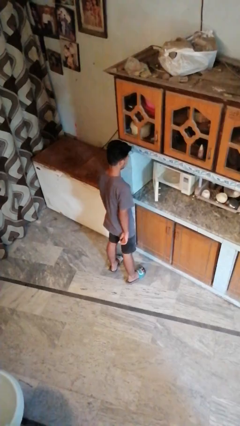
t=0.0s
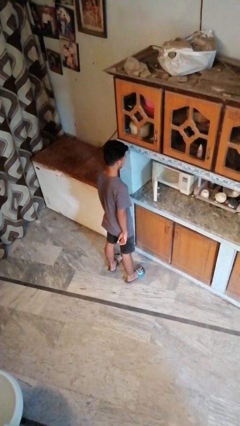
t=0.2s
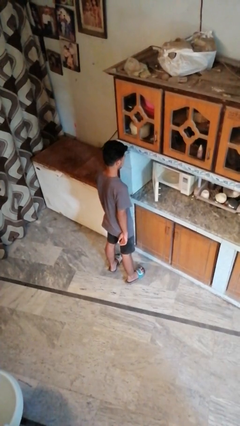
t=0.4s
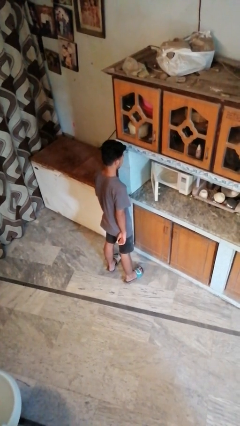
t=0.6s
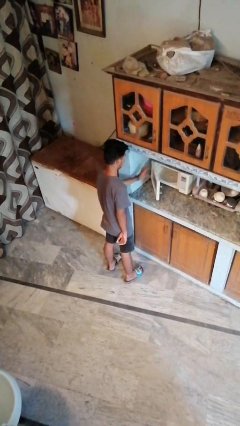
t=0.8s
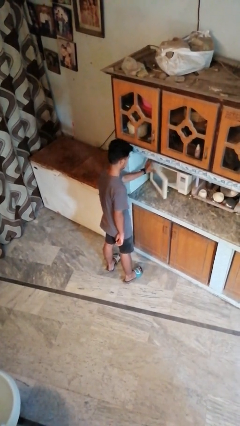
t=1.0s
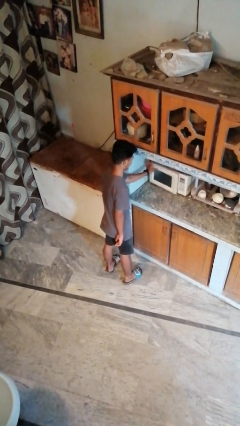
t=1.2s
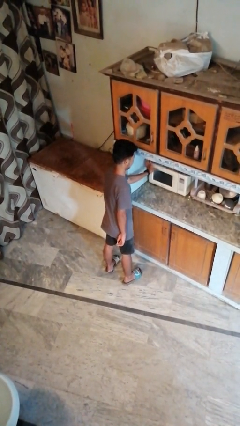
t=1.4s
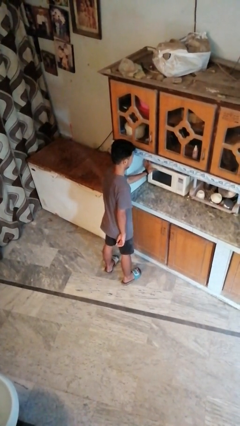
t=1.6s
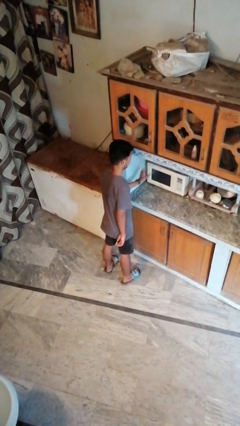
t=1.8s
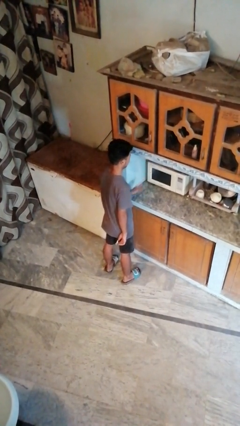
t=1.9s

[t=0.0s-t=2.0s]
person closes oven door

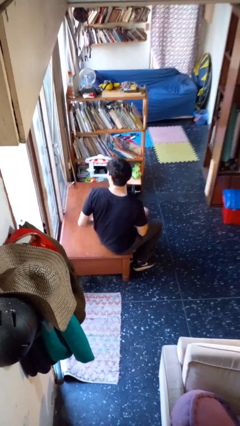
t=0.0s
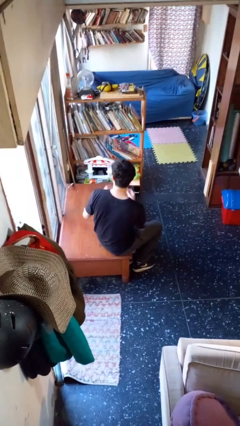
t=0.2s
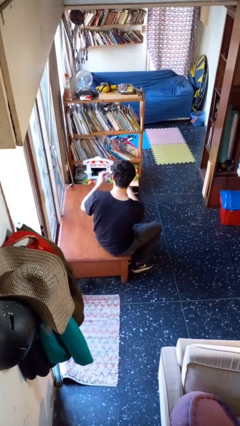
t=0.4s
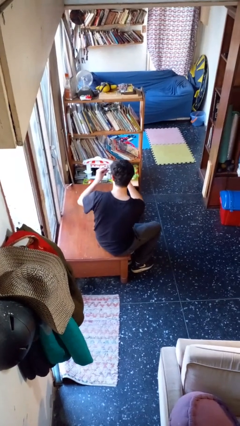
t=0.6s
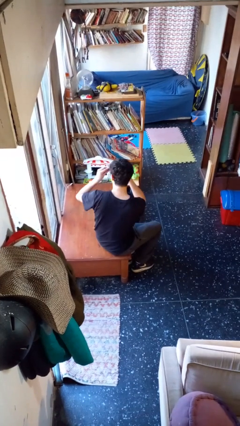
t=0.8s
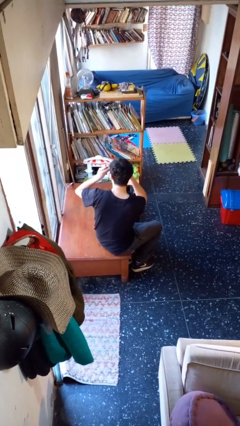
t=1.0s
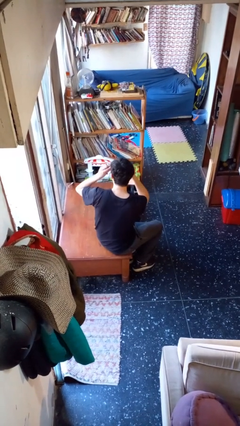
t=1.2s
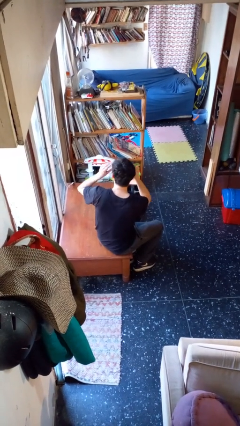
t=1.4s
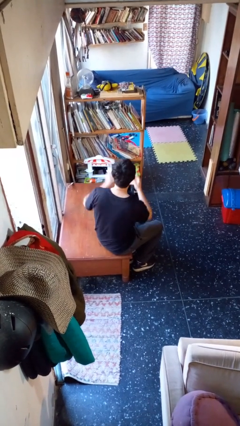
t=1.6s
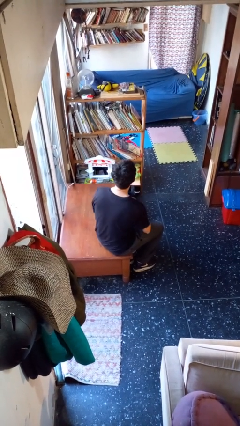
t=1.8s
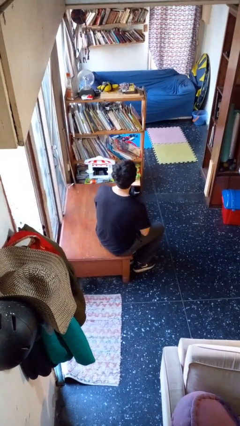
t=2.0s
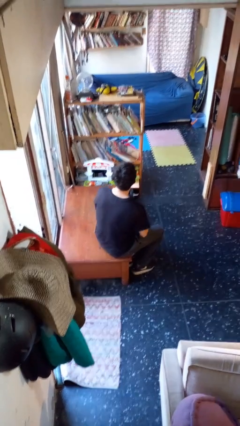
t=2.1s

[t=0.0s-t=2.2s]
person puts on glasses

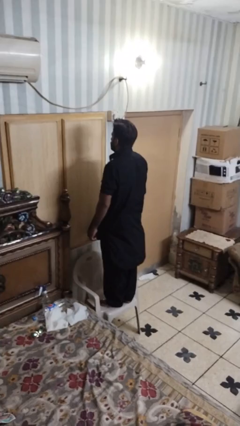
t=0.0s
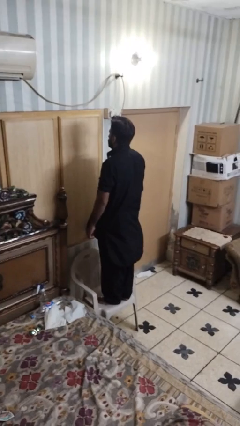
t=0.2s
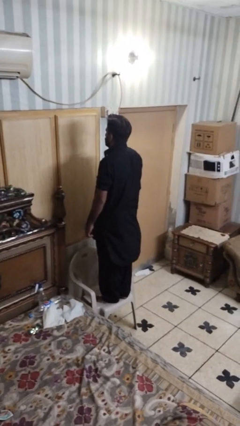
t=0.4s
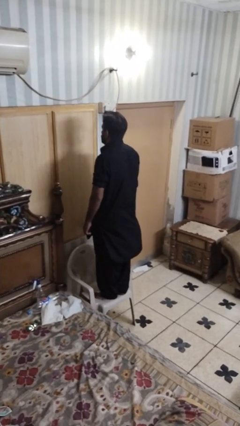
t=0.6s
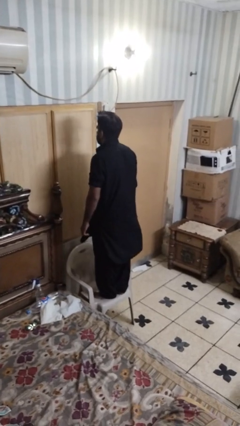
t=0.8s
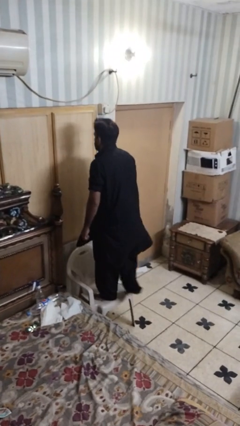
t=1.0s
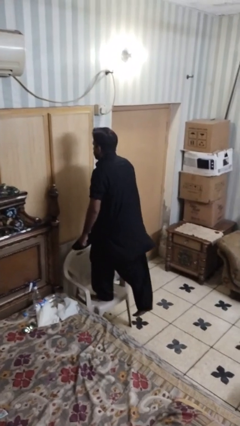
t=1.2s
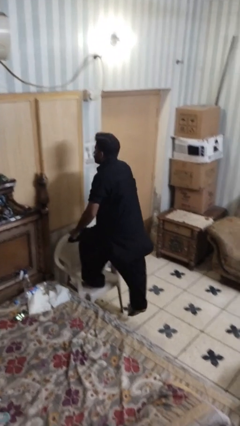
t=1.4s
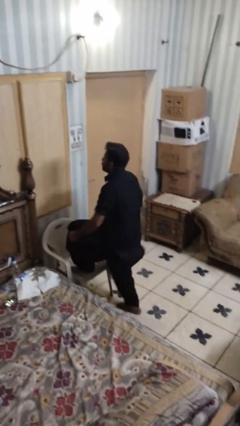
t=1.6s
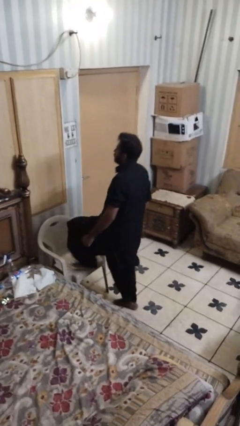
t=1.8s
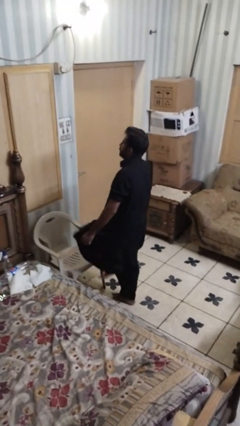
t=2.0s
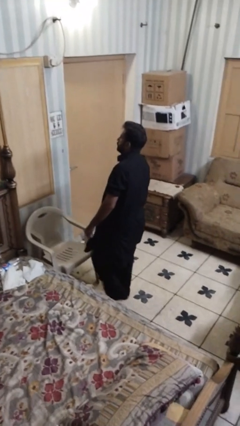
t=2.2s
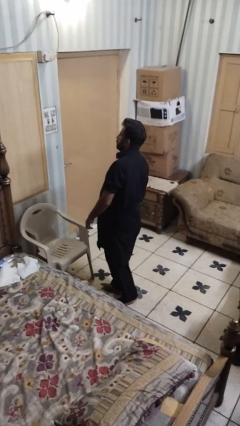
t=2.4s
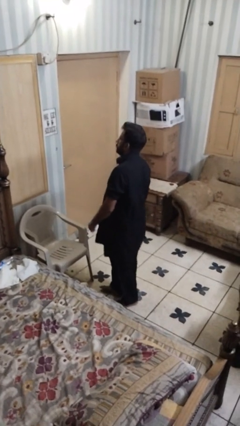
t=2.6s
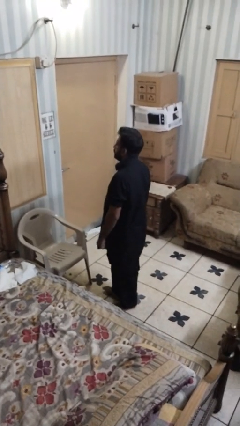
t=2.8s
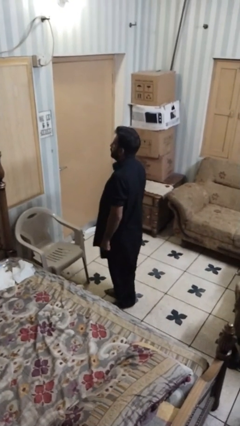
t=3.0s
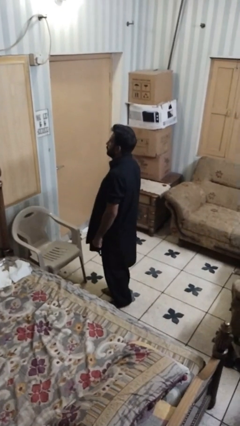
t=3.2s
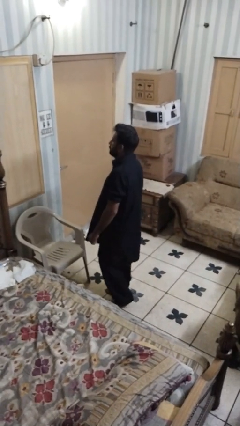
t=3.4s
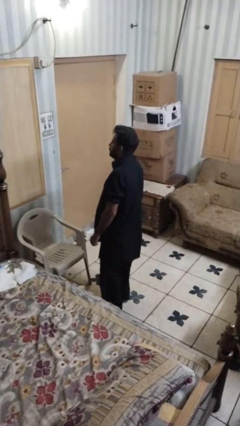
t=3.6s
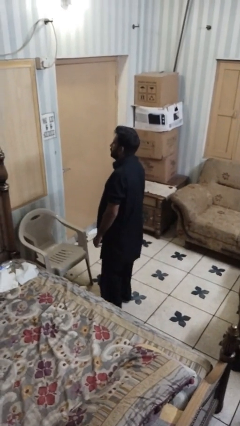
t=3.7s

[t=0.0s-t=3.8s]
person climbs off chair

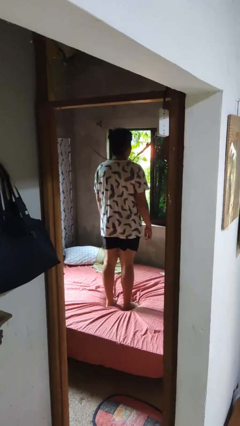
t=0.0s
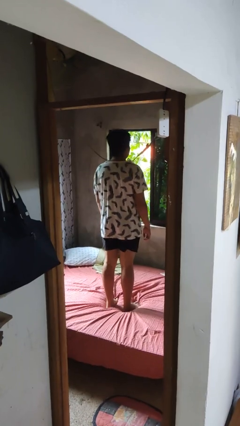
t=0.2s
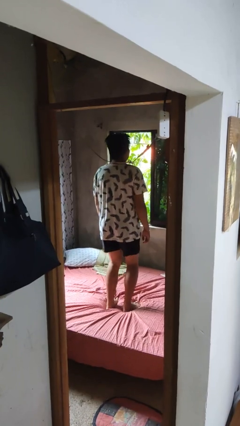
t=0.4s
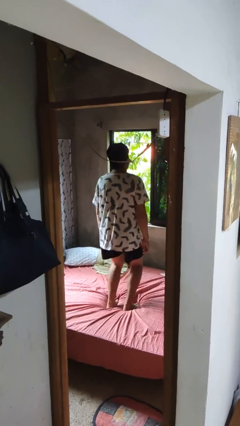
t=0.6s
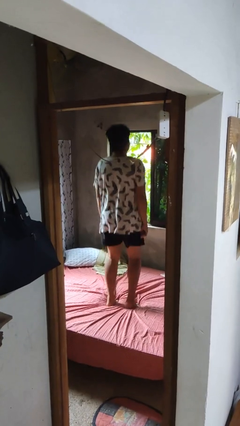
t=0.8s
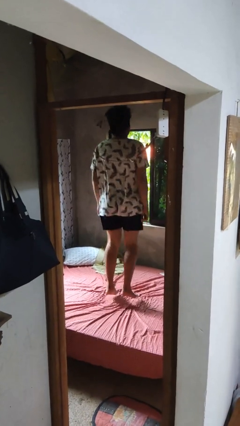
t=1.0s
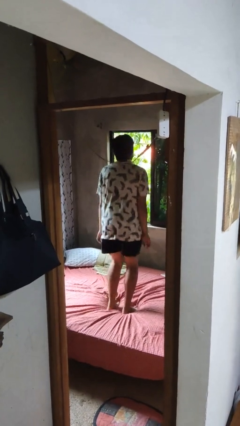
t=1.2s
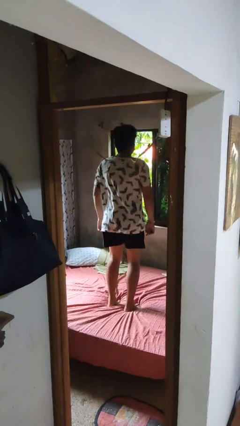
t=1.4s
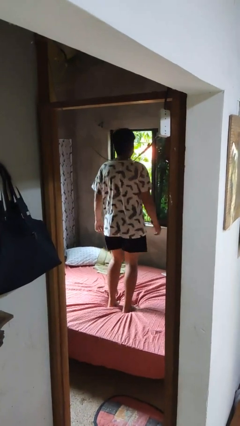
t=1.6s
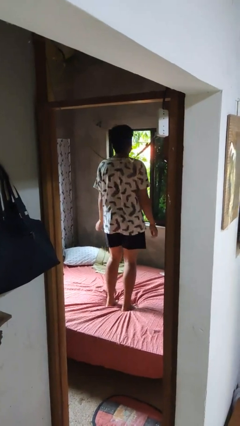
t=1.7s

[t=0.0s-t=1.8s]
person jumps on bed

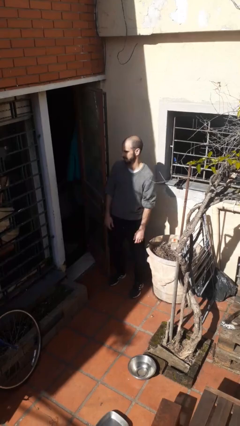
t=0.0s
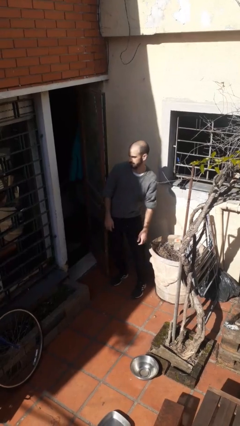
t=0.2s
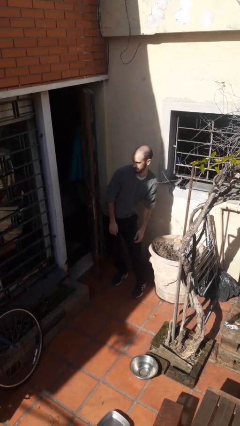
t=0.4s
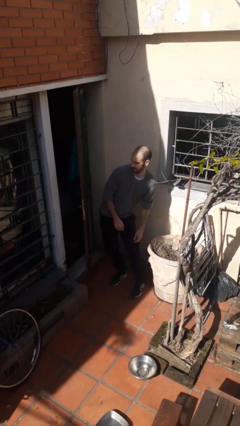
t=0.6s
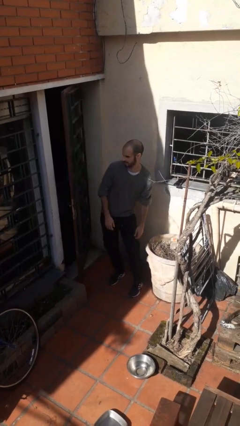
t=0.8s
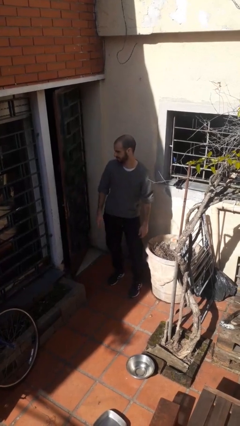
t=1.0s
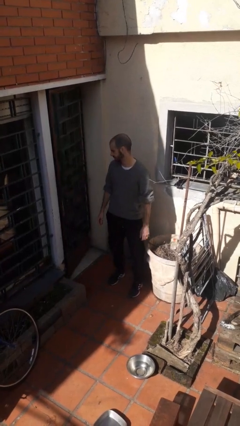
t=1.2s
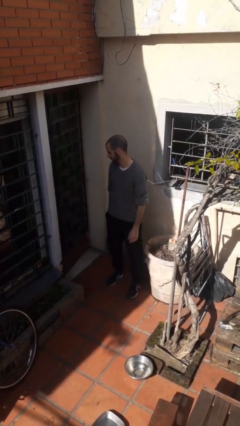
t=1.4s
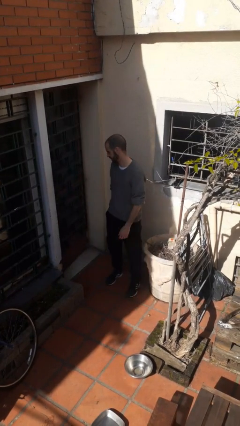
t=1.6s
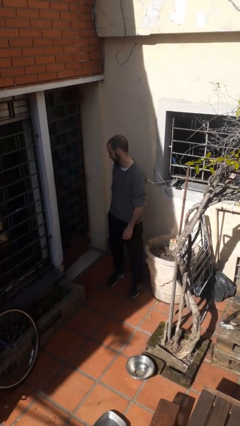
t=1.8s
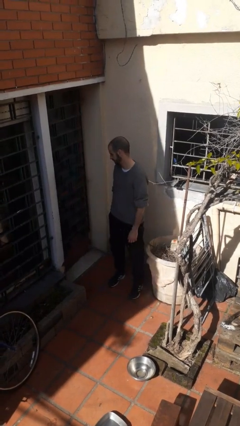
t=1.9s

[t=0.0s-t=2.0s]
person closes door with hip

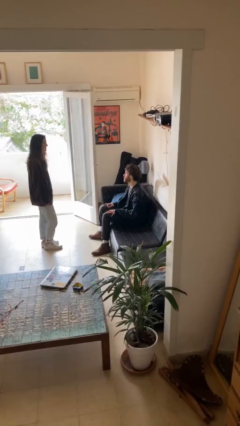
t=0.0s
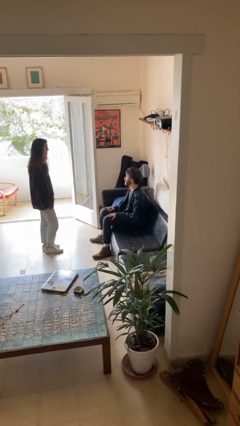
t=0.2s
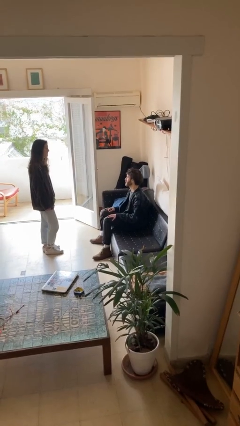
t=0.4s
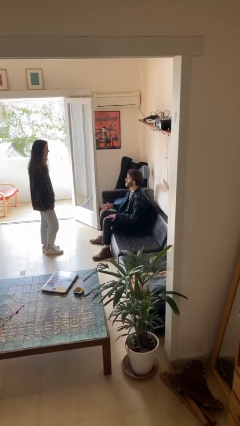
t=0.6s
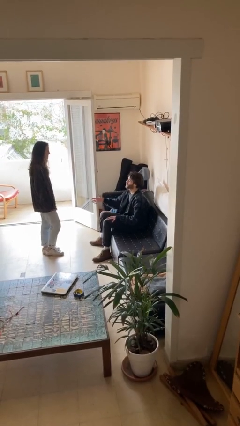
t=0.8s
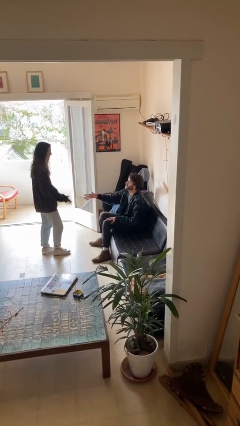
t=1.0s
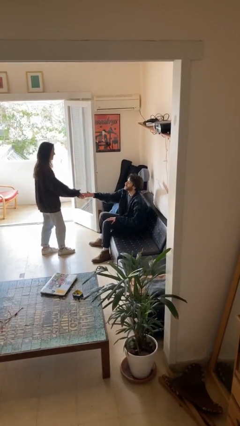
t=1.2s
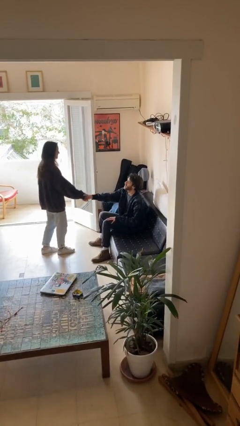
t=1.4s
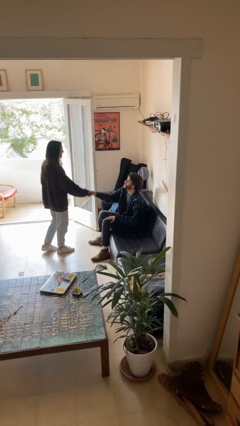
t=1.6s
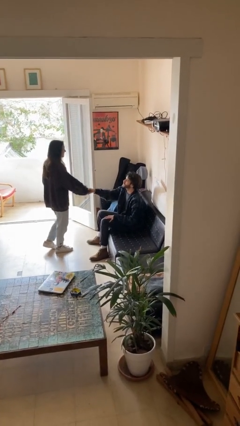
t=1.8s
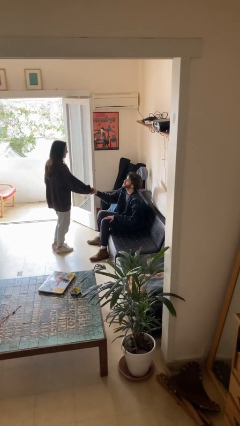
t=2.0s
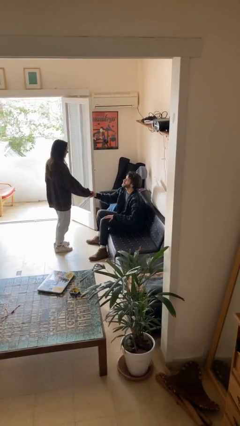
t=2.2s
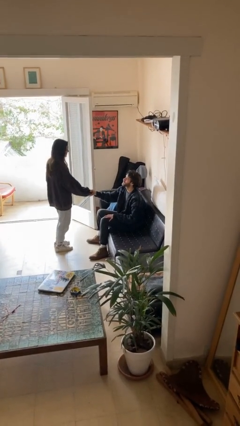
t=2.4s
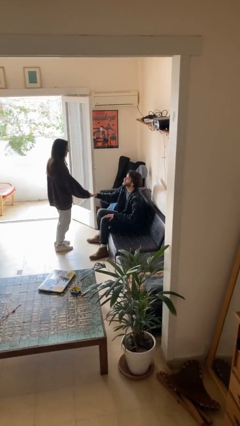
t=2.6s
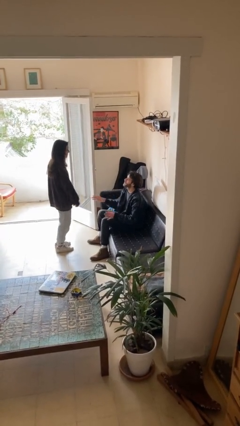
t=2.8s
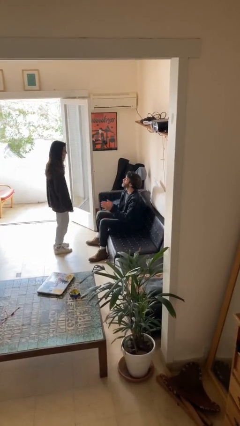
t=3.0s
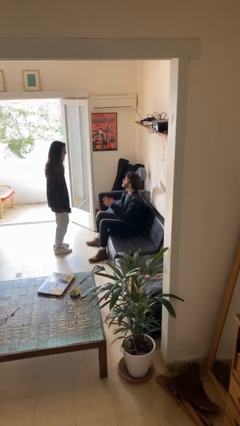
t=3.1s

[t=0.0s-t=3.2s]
person shakes hand

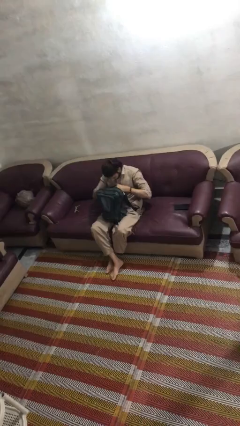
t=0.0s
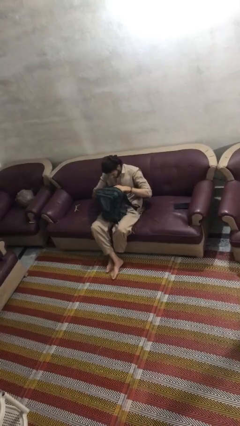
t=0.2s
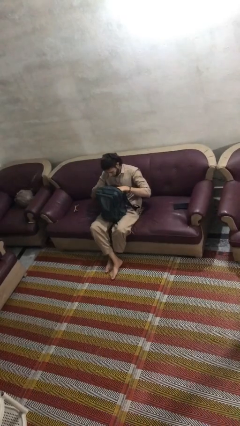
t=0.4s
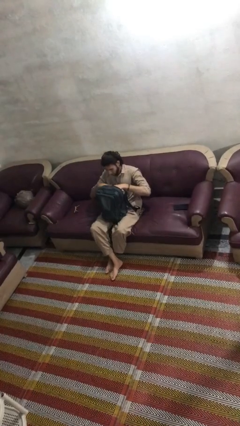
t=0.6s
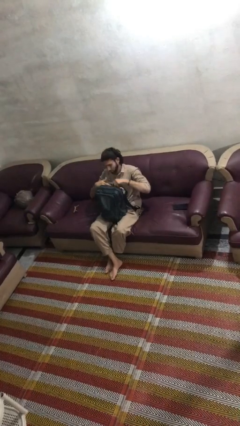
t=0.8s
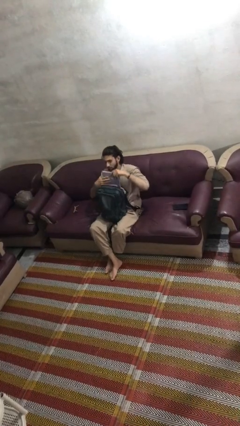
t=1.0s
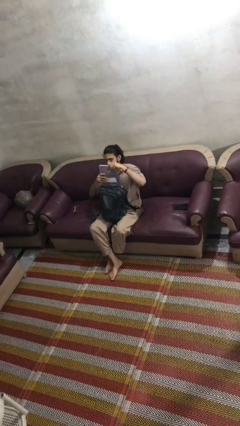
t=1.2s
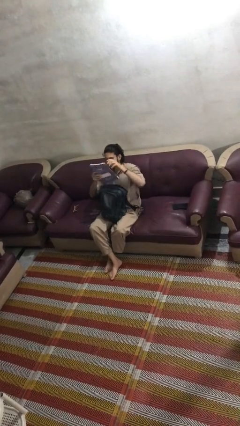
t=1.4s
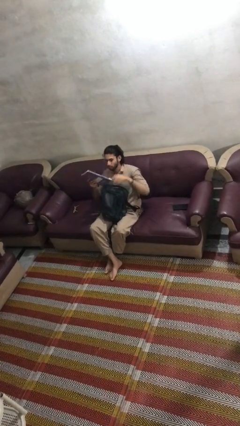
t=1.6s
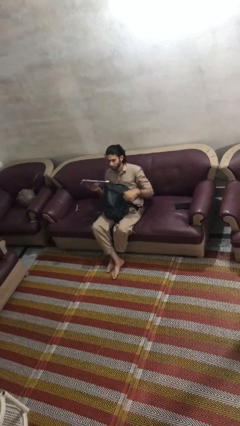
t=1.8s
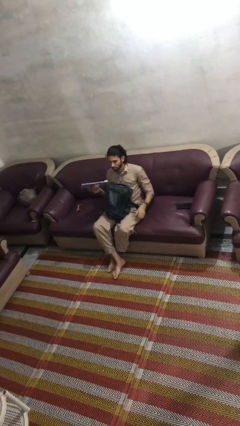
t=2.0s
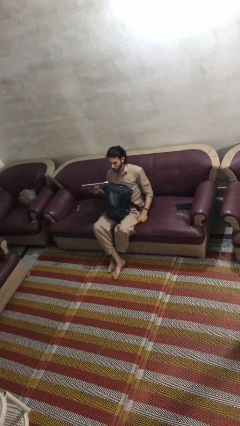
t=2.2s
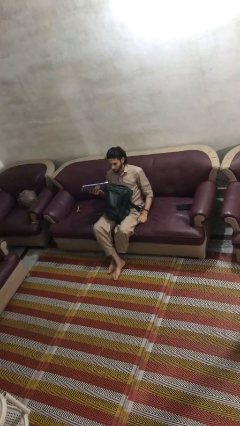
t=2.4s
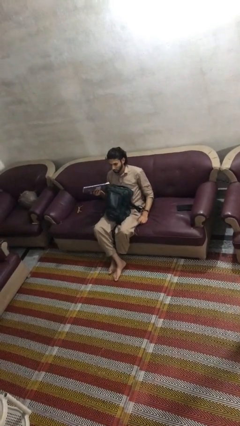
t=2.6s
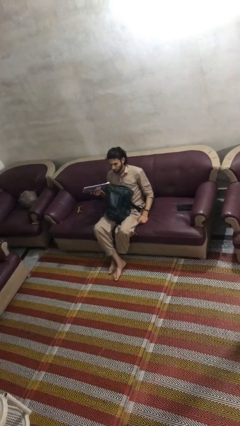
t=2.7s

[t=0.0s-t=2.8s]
person takes object from backpack
